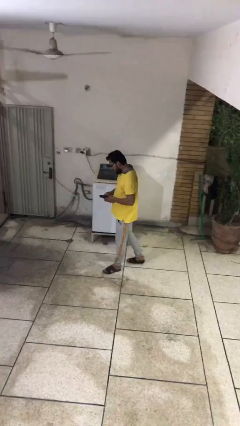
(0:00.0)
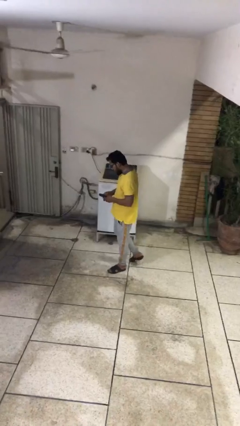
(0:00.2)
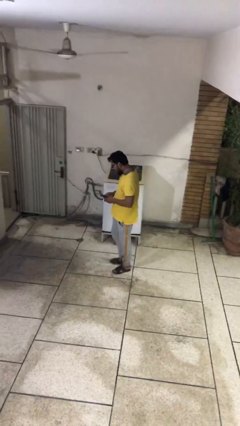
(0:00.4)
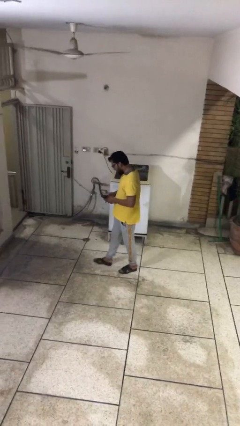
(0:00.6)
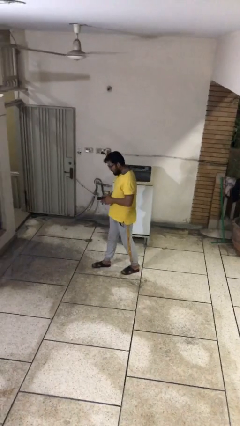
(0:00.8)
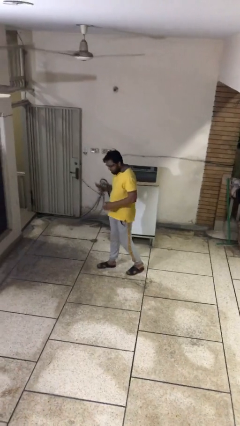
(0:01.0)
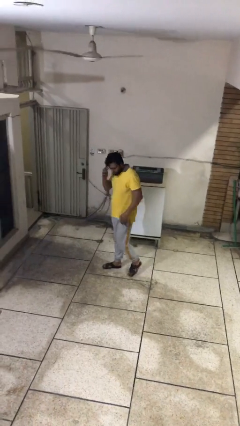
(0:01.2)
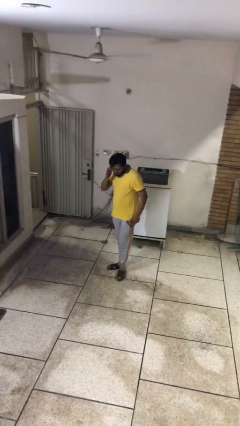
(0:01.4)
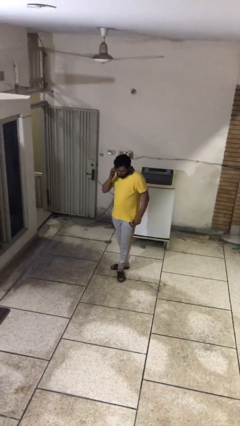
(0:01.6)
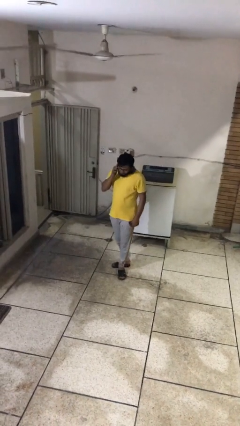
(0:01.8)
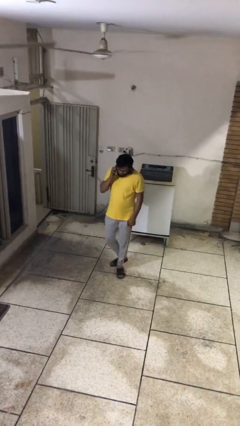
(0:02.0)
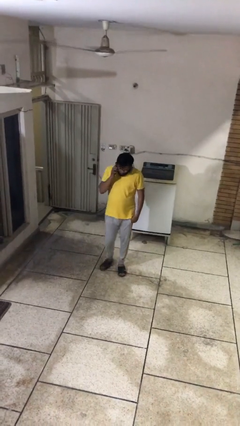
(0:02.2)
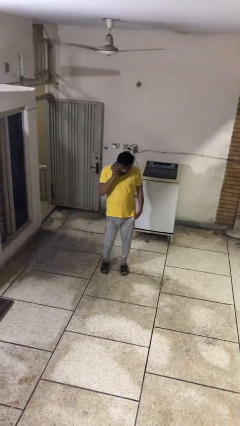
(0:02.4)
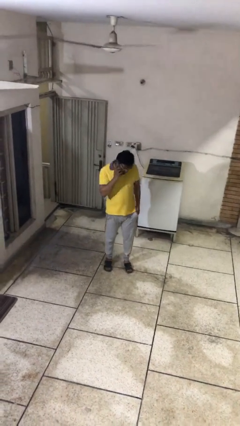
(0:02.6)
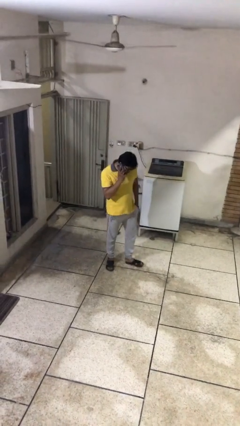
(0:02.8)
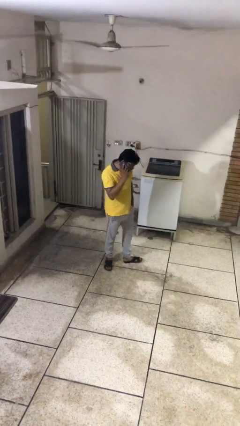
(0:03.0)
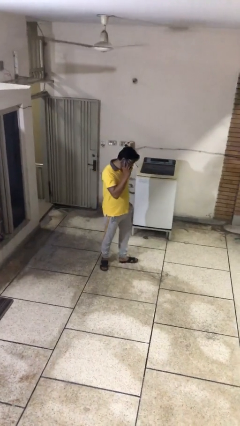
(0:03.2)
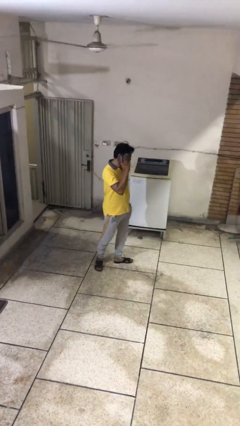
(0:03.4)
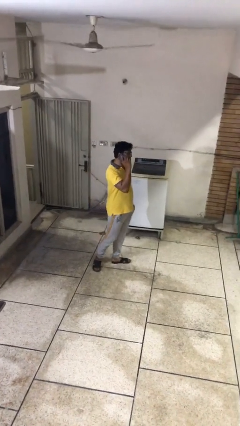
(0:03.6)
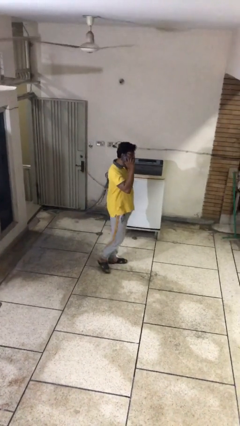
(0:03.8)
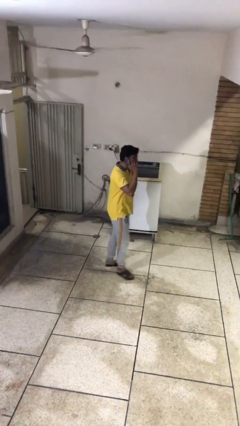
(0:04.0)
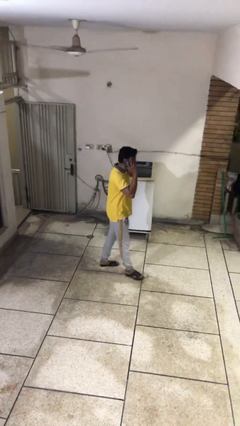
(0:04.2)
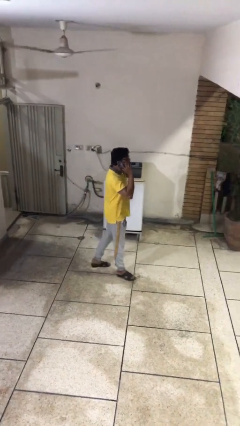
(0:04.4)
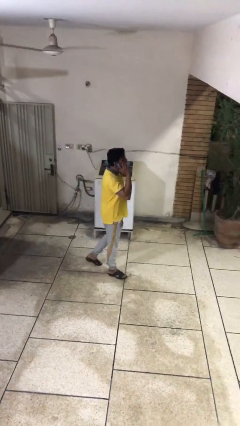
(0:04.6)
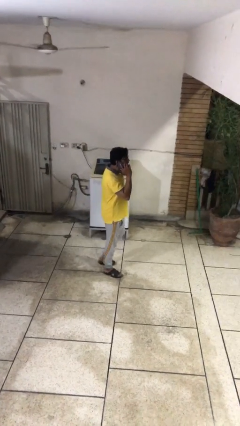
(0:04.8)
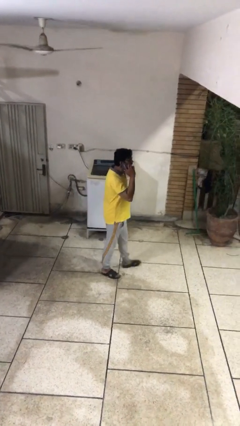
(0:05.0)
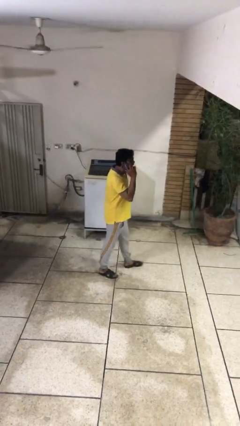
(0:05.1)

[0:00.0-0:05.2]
person talks on phone

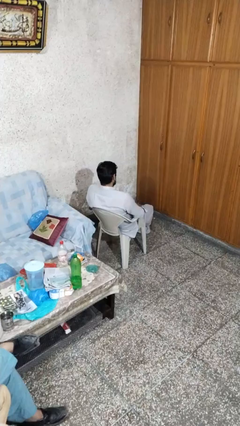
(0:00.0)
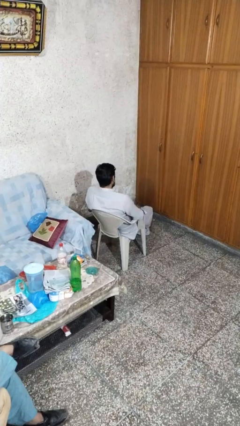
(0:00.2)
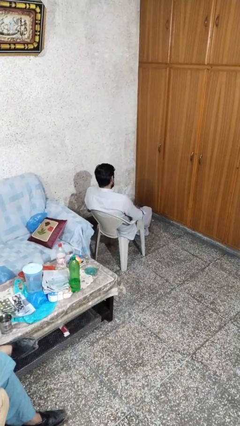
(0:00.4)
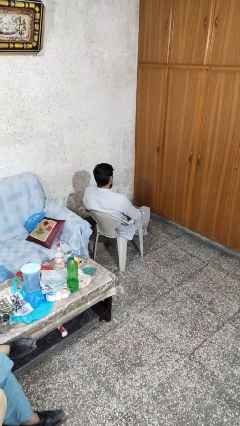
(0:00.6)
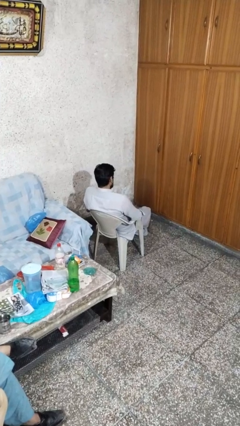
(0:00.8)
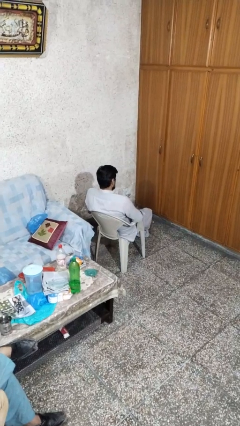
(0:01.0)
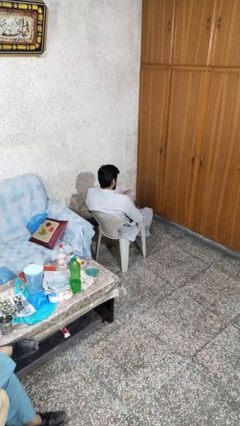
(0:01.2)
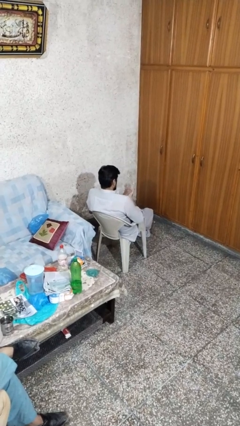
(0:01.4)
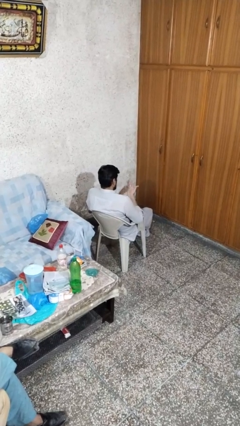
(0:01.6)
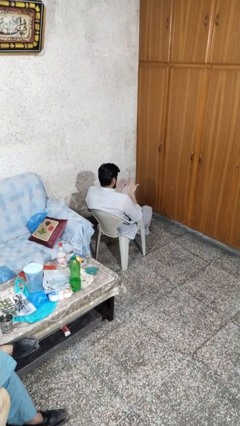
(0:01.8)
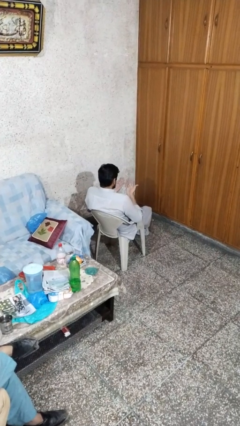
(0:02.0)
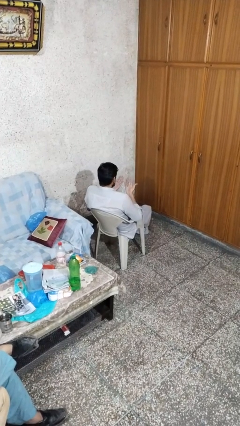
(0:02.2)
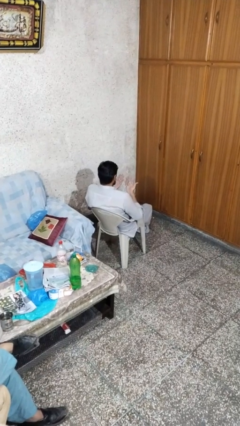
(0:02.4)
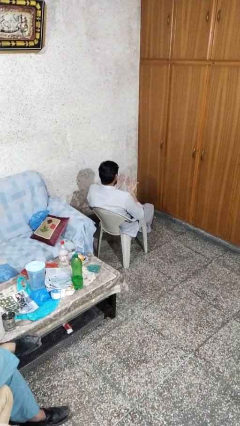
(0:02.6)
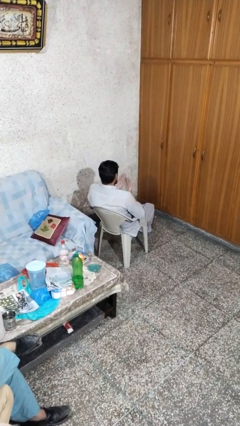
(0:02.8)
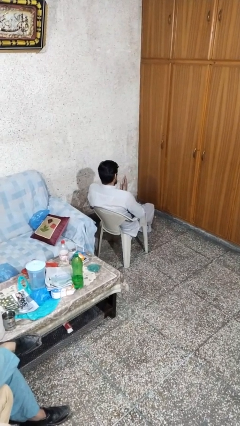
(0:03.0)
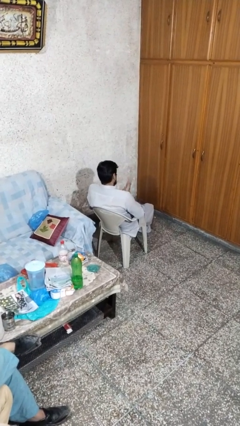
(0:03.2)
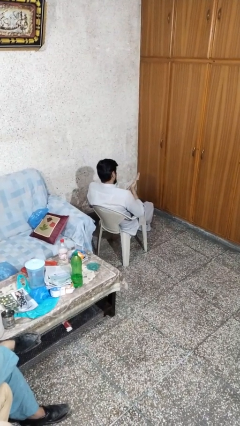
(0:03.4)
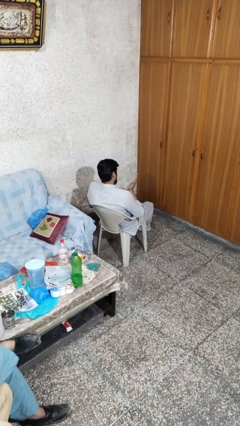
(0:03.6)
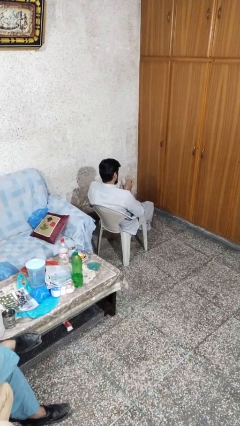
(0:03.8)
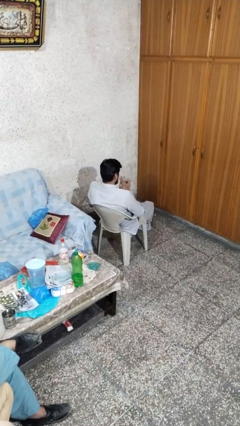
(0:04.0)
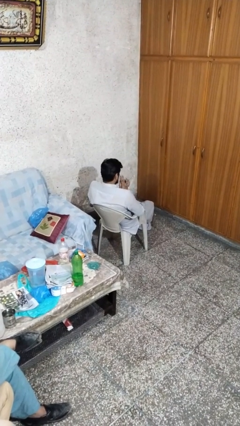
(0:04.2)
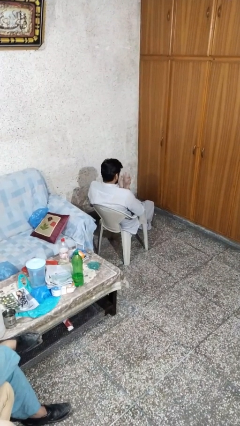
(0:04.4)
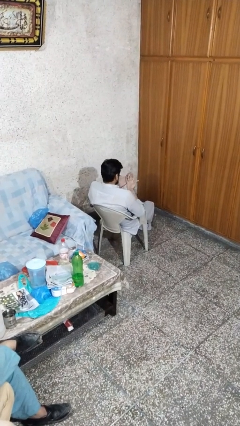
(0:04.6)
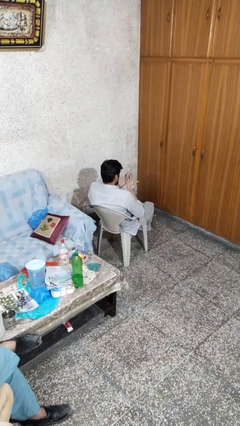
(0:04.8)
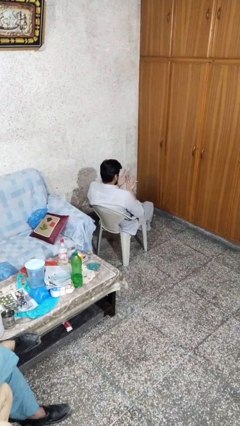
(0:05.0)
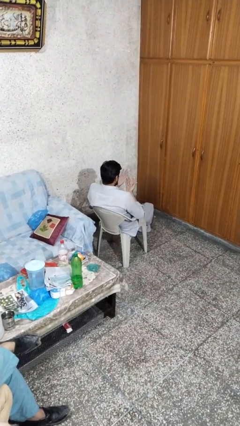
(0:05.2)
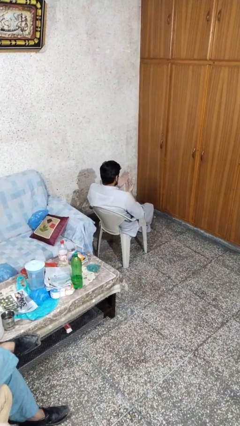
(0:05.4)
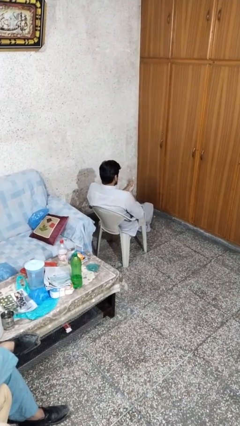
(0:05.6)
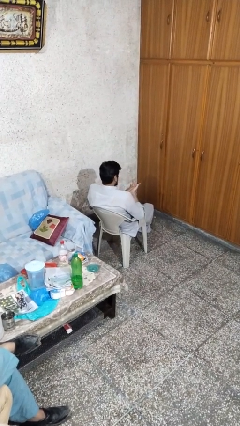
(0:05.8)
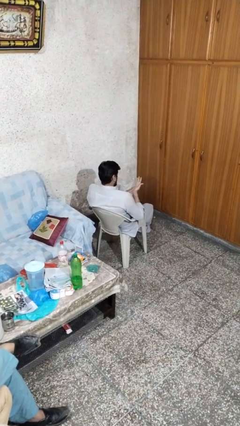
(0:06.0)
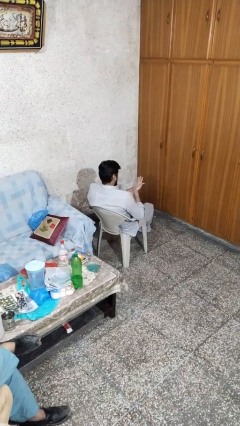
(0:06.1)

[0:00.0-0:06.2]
person looks at hands in lap

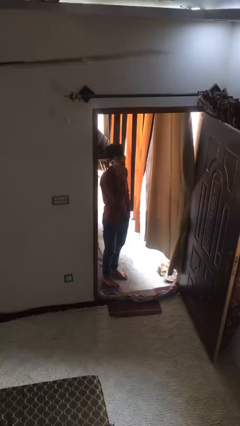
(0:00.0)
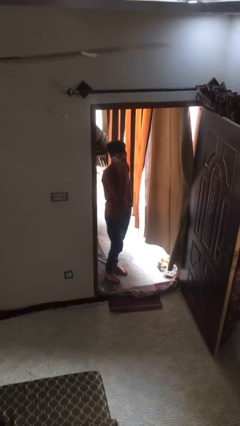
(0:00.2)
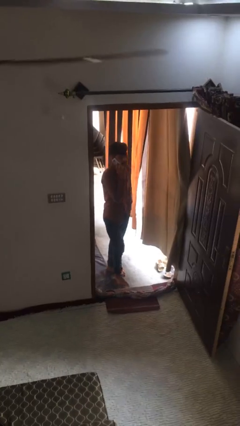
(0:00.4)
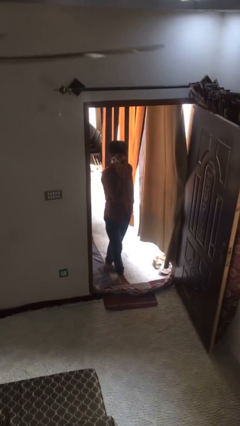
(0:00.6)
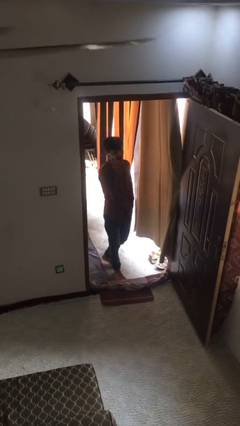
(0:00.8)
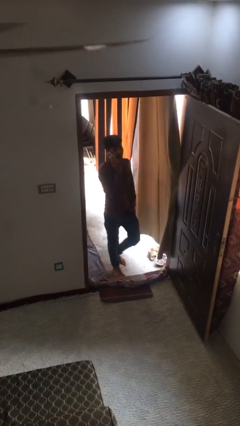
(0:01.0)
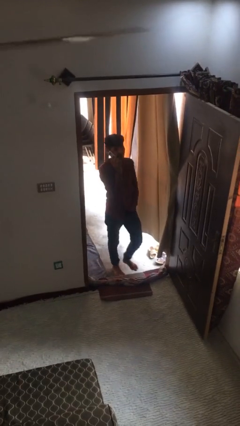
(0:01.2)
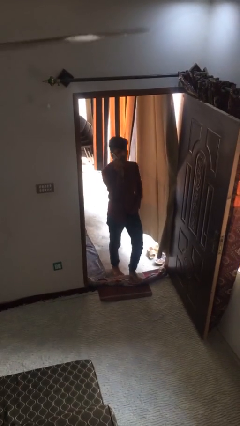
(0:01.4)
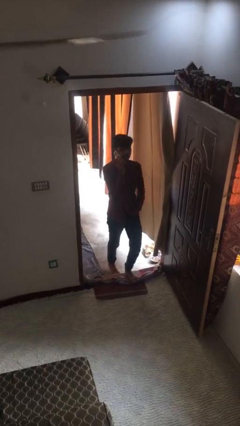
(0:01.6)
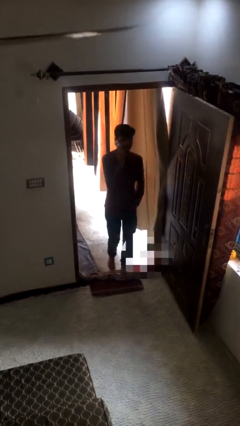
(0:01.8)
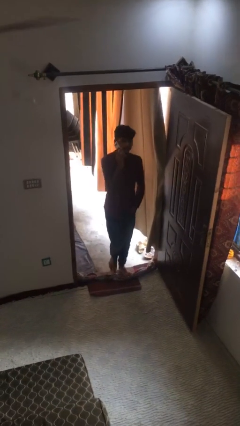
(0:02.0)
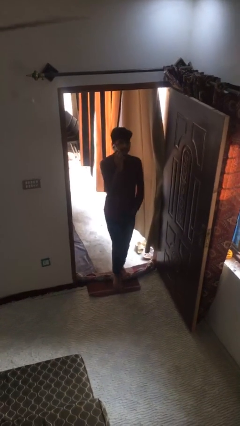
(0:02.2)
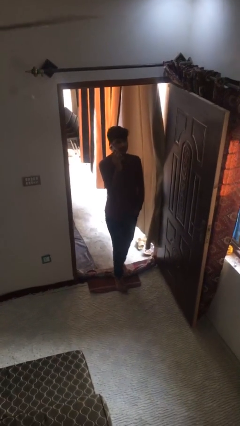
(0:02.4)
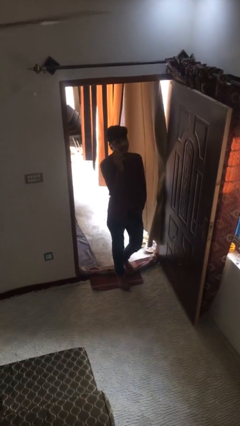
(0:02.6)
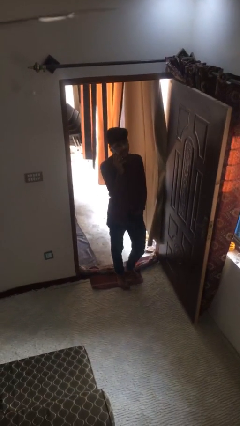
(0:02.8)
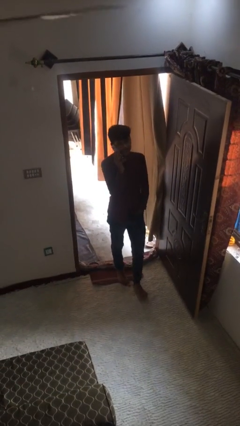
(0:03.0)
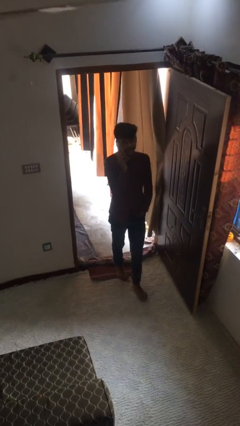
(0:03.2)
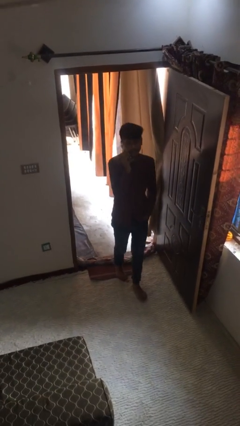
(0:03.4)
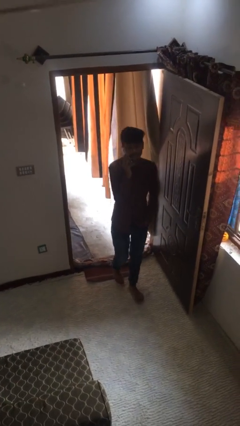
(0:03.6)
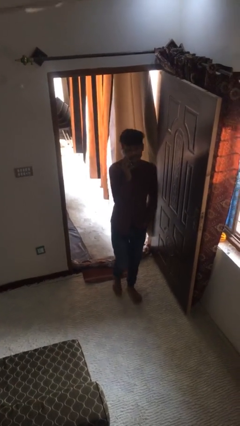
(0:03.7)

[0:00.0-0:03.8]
person enters scene through structure

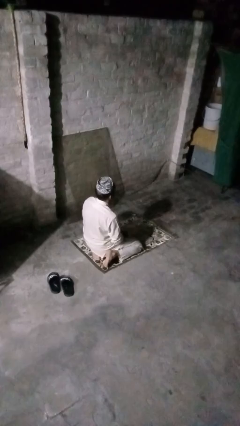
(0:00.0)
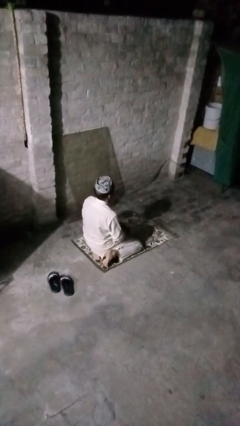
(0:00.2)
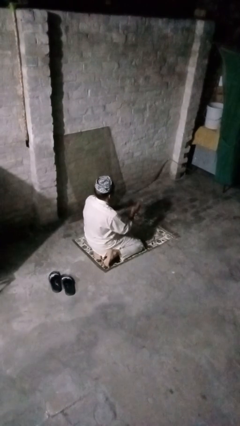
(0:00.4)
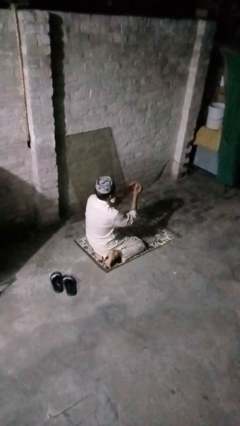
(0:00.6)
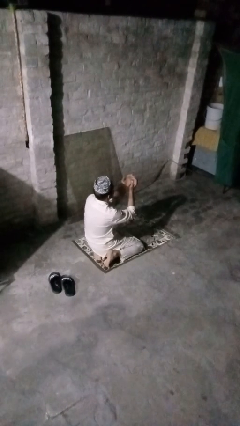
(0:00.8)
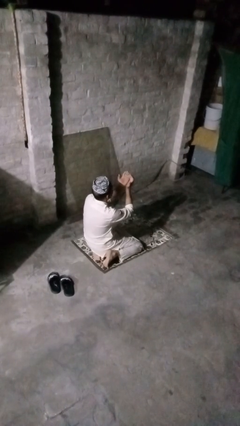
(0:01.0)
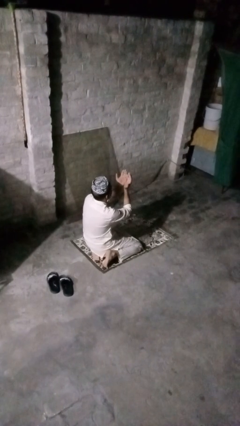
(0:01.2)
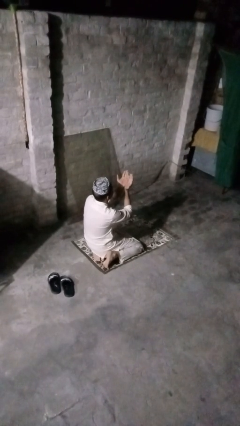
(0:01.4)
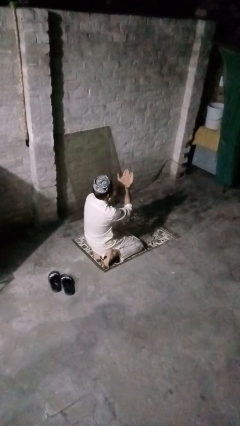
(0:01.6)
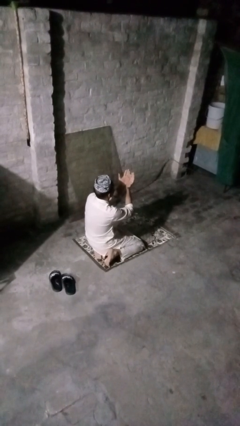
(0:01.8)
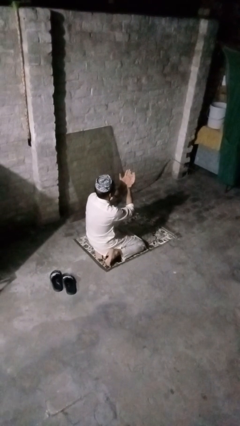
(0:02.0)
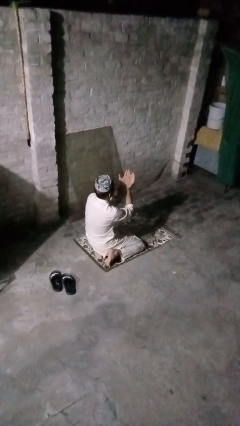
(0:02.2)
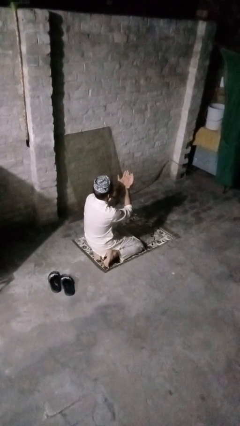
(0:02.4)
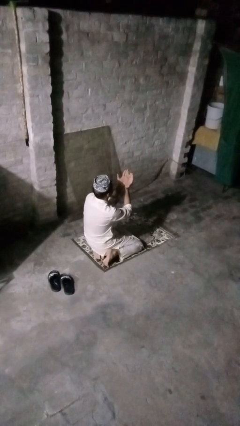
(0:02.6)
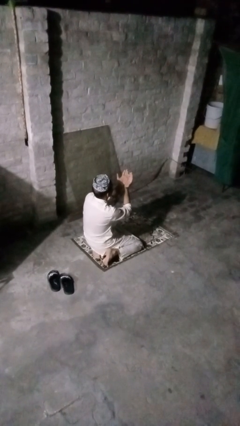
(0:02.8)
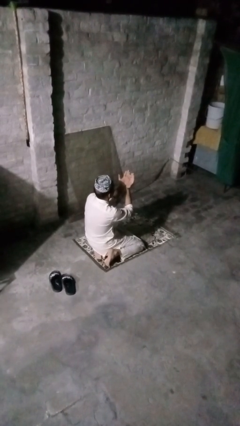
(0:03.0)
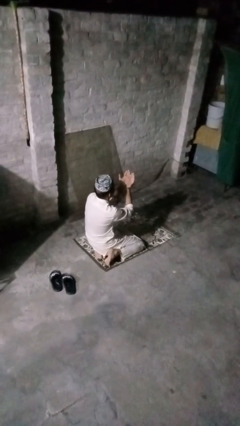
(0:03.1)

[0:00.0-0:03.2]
person prays
